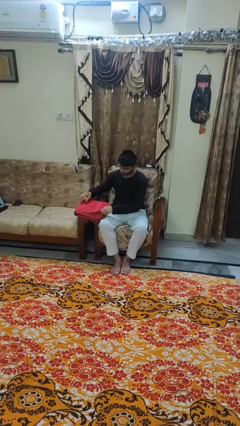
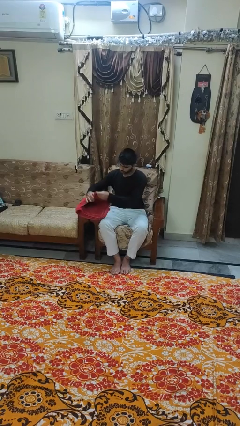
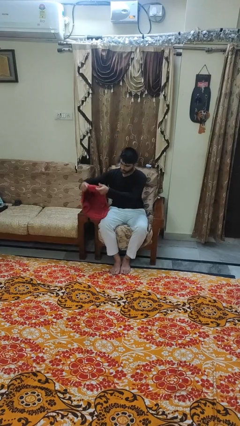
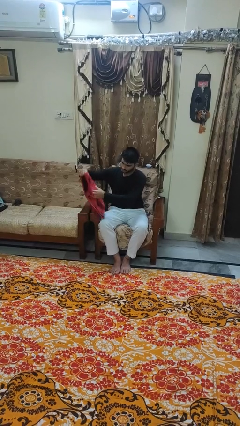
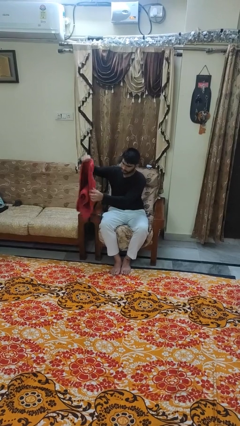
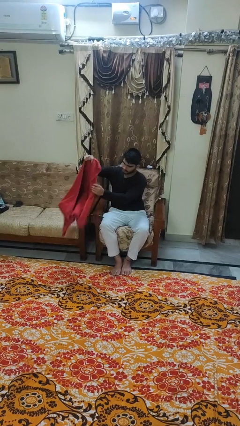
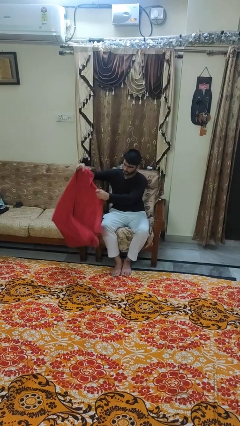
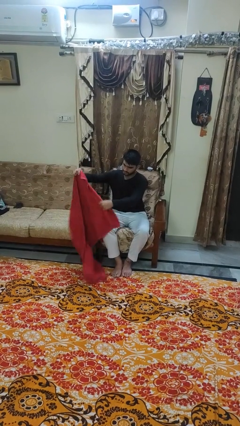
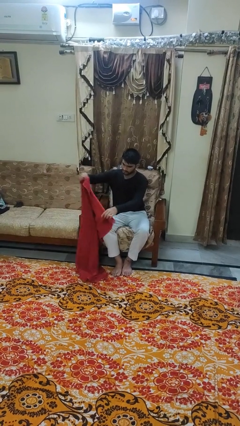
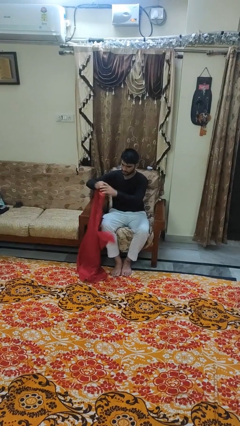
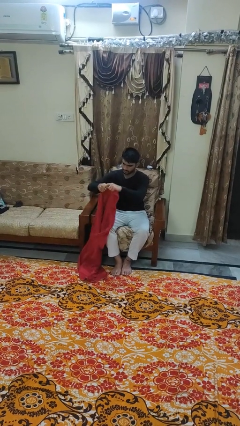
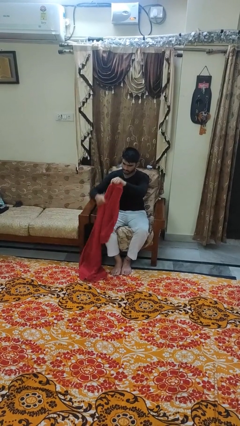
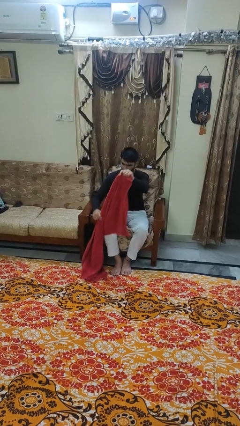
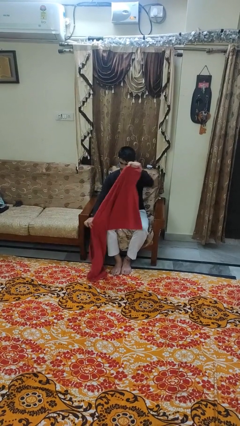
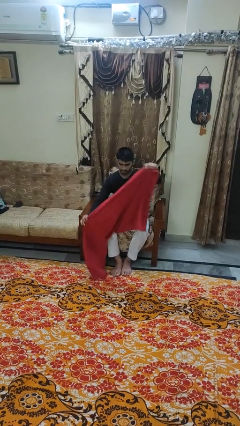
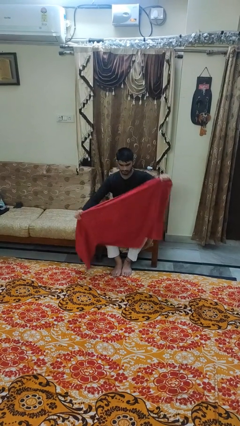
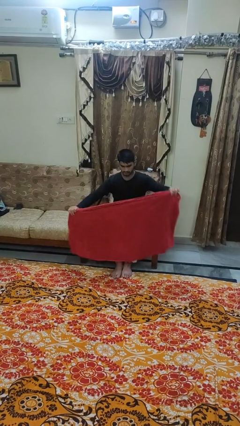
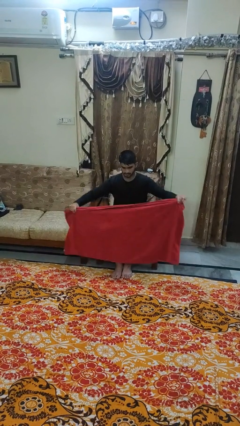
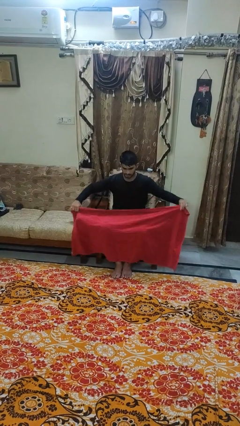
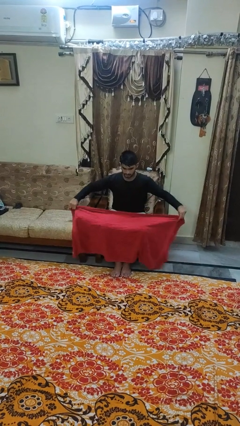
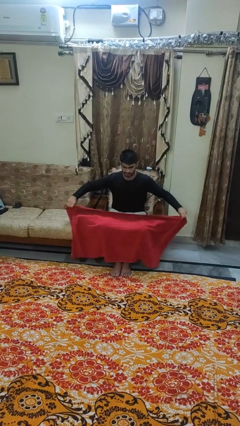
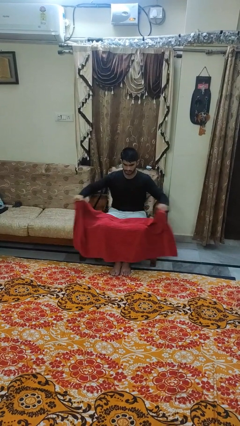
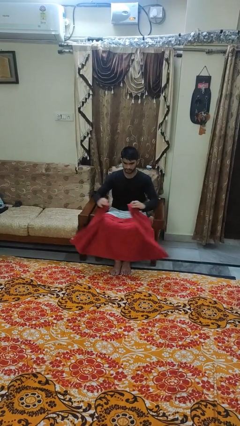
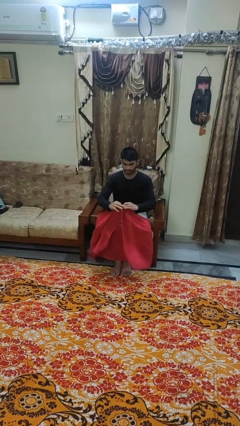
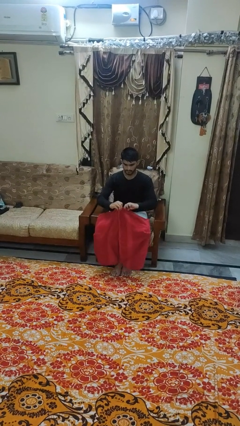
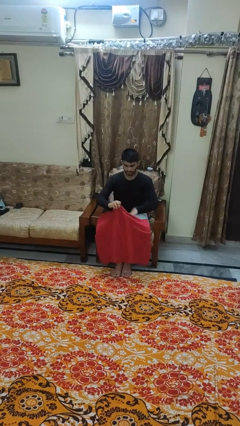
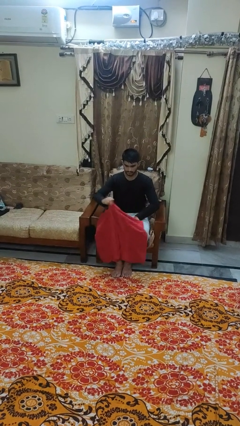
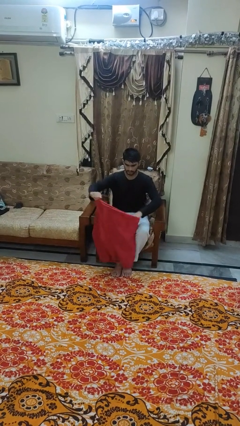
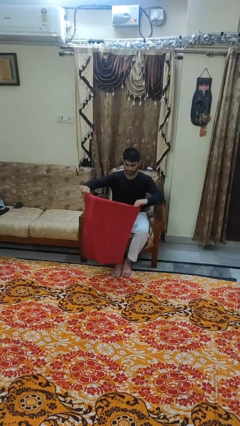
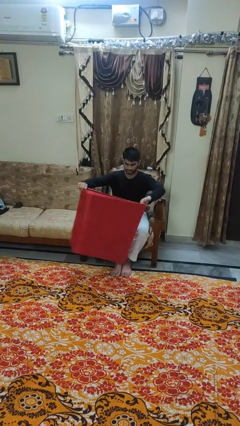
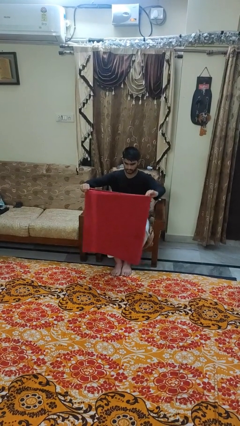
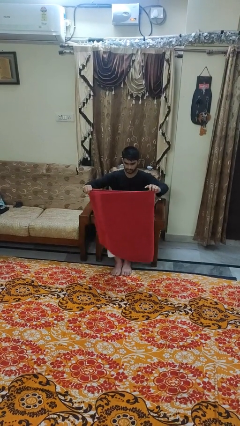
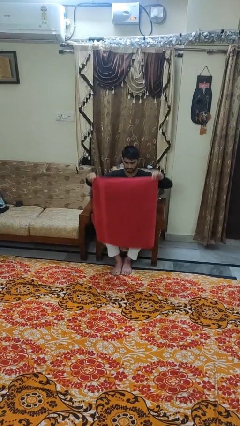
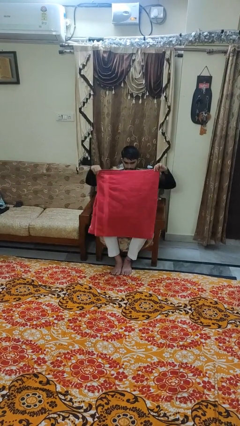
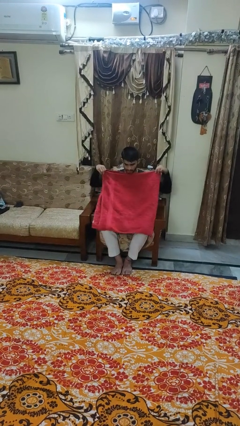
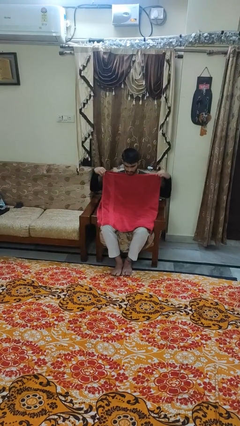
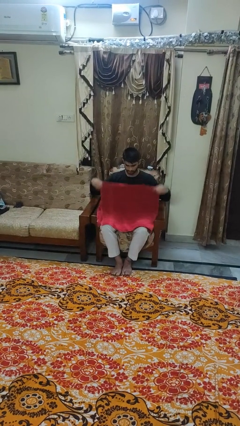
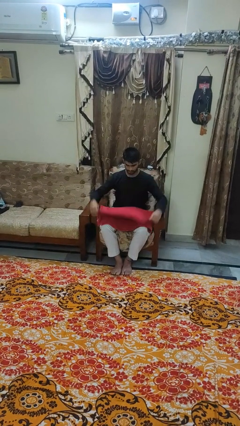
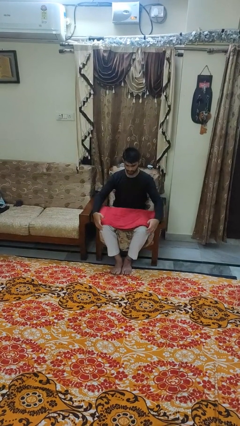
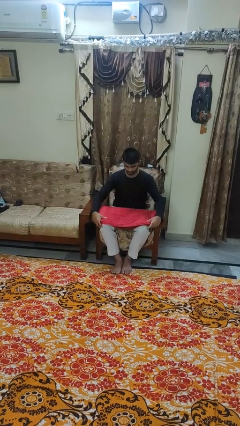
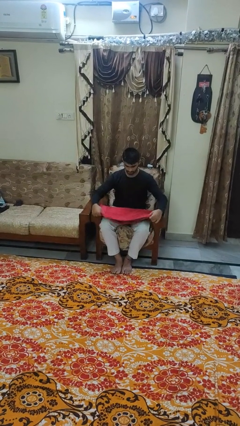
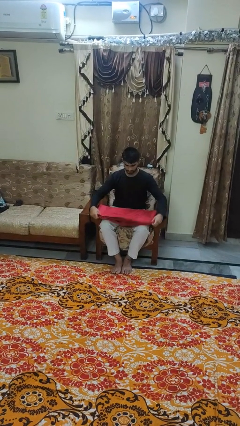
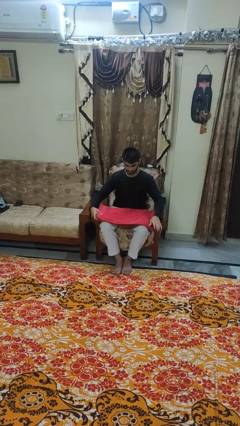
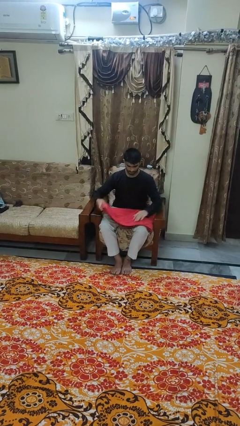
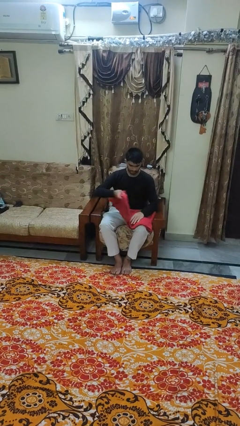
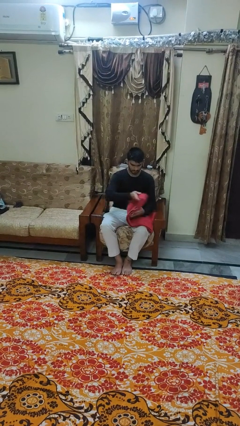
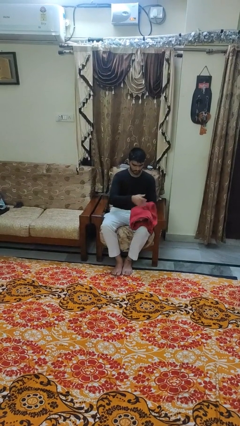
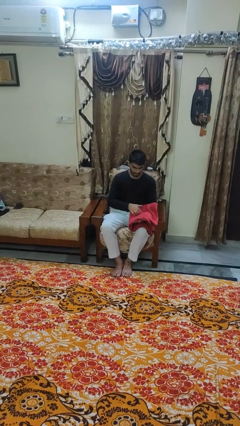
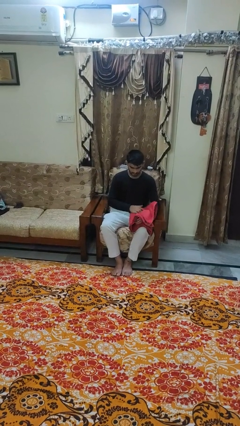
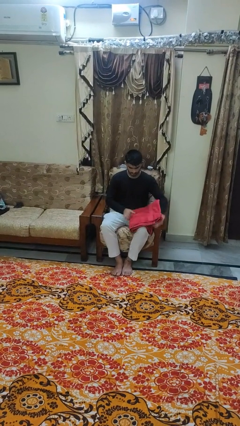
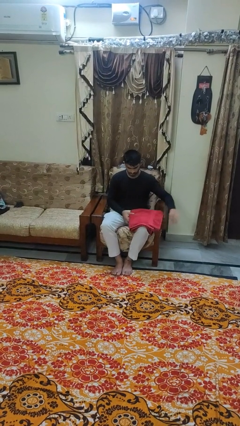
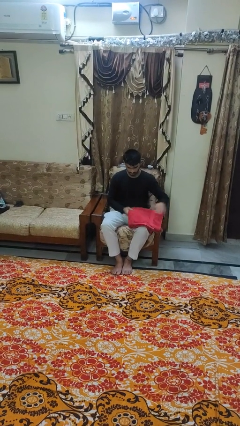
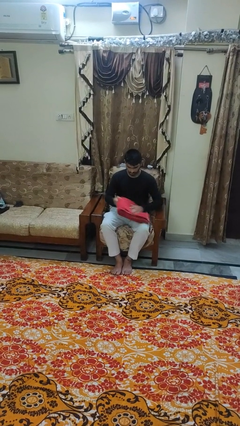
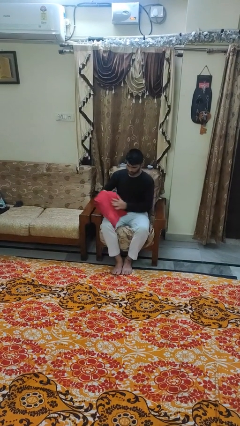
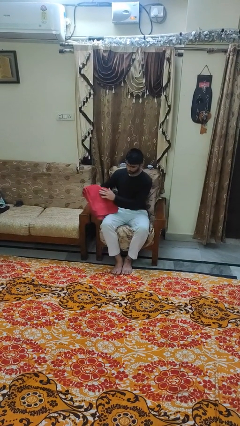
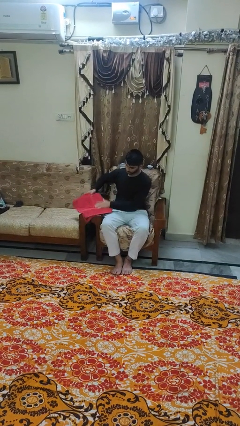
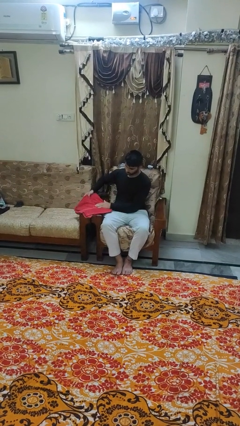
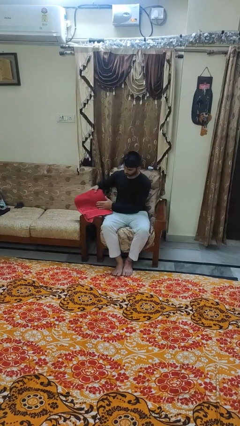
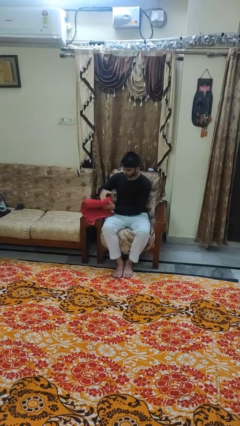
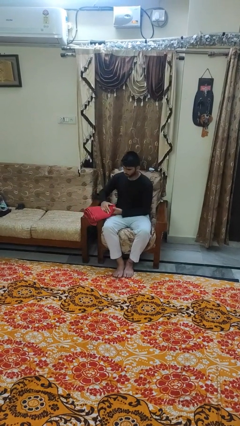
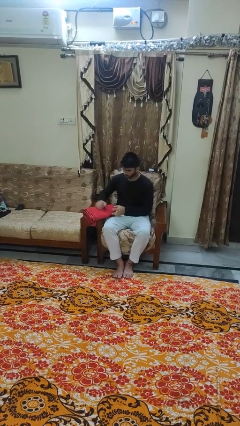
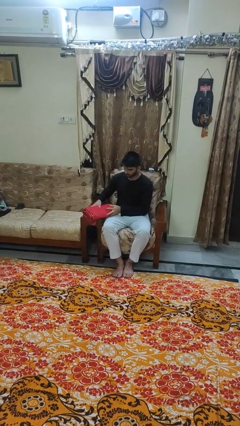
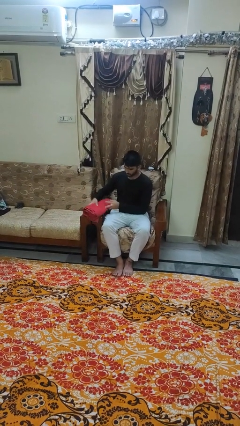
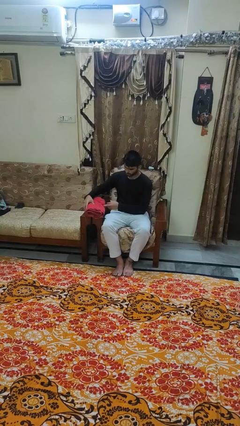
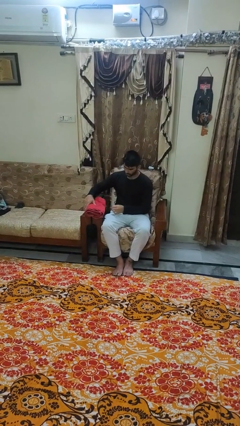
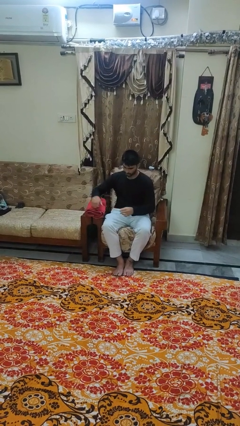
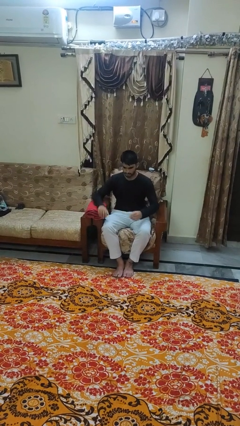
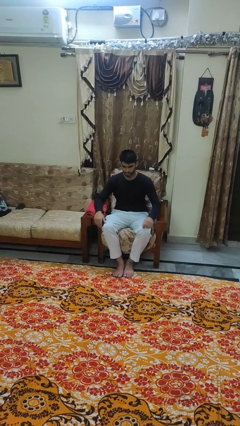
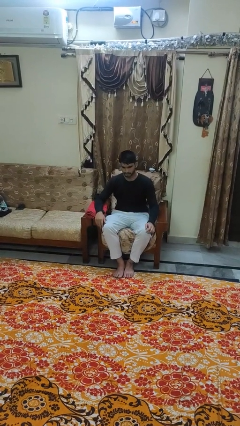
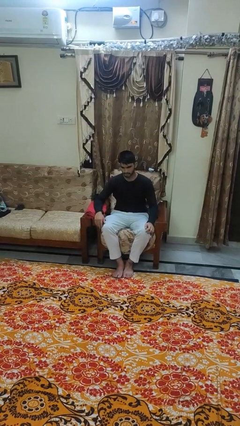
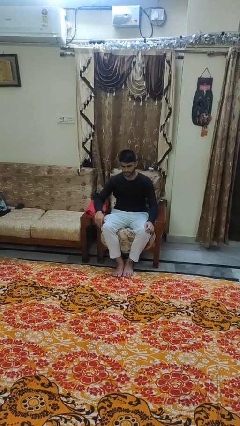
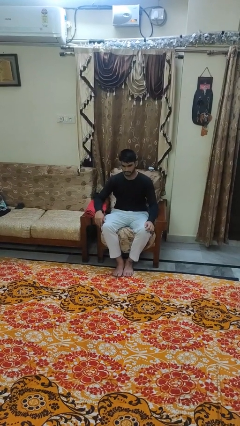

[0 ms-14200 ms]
person folds towel

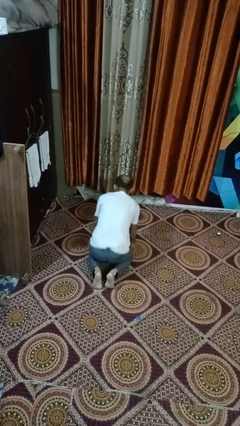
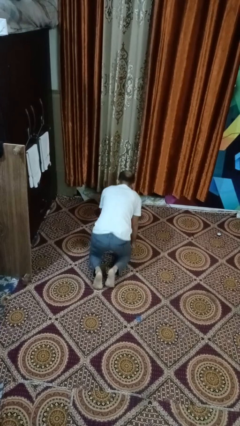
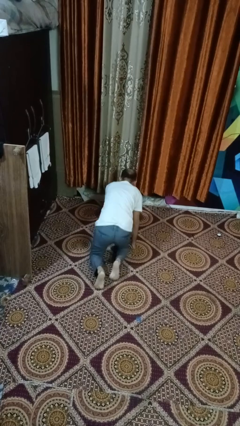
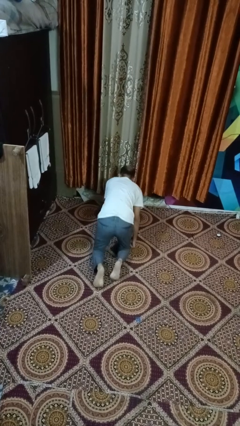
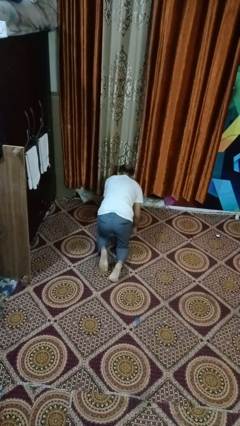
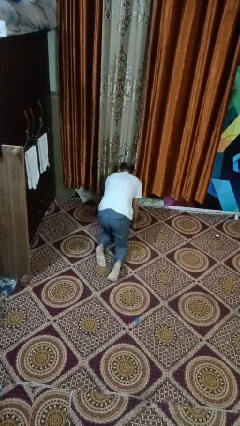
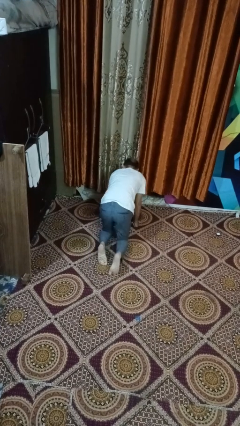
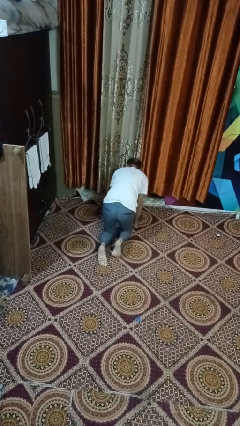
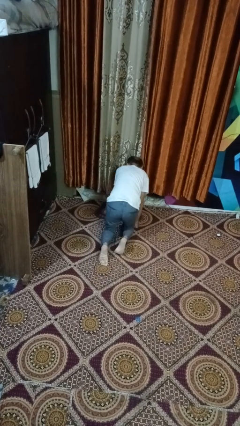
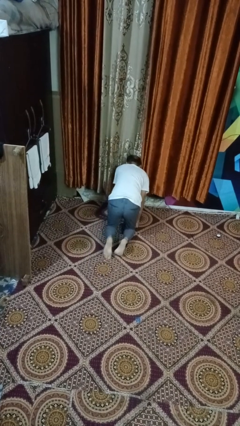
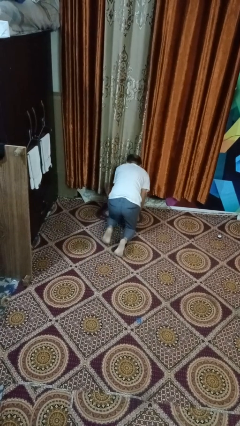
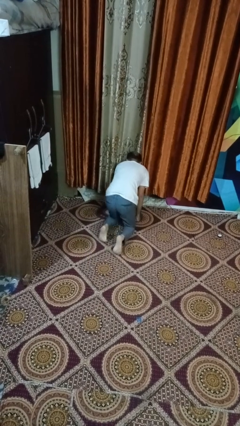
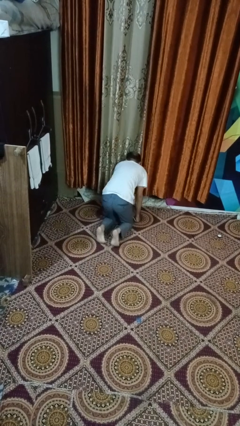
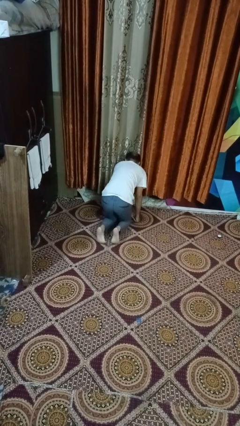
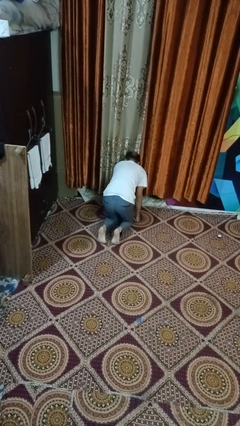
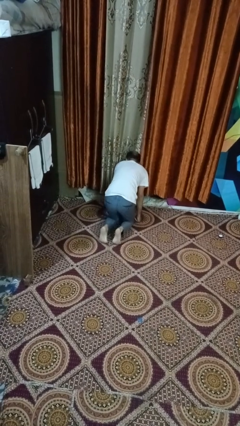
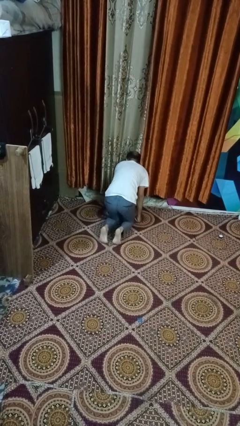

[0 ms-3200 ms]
person crawls

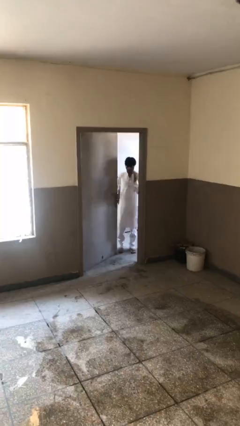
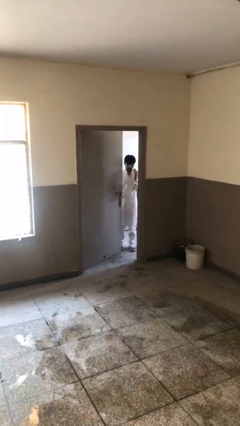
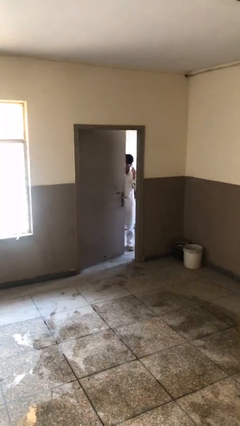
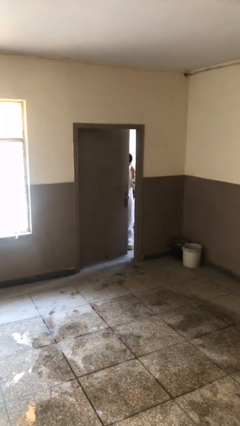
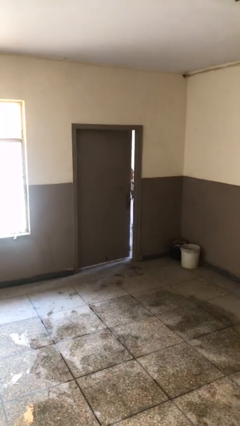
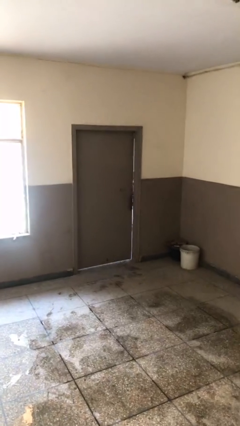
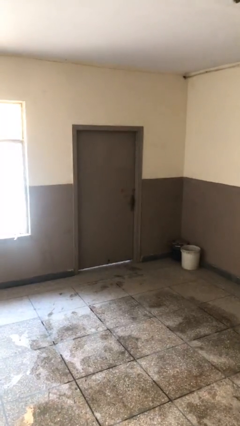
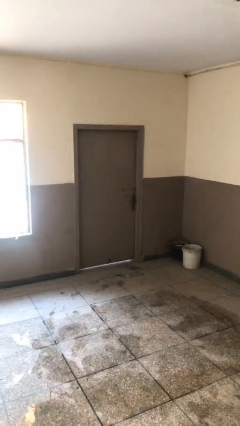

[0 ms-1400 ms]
person closes facility door
